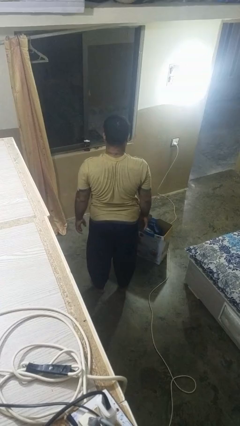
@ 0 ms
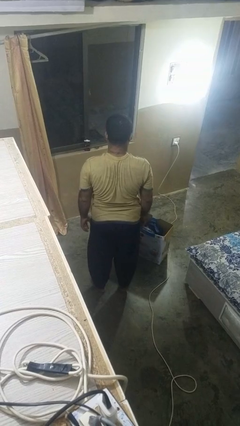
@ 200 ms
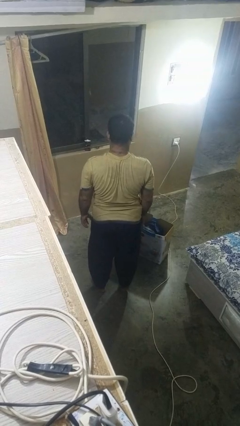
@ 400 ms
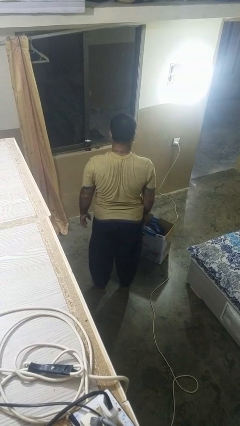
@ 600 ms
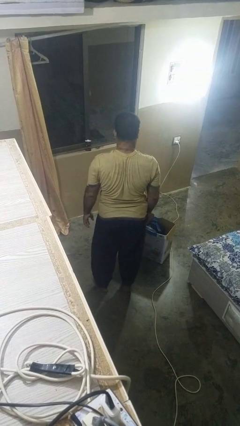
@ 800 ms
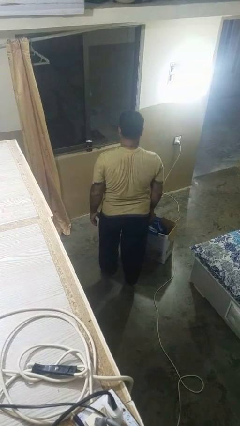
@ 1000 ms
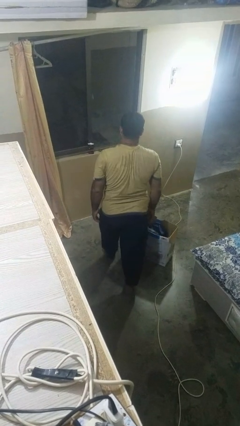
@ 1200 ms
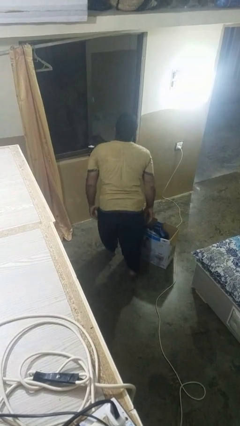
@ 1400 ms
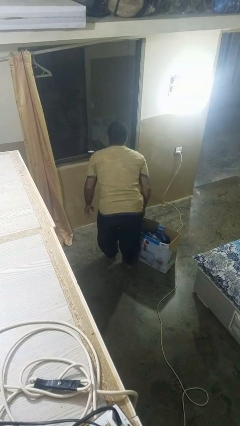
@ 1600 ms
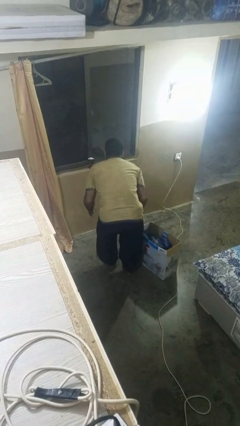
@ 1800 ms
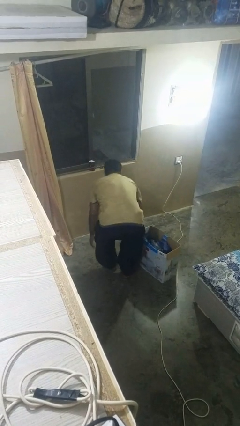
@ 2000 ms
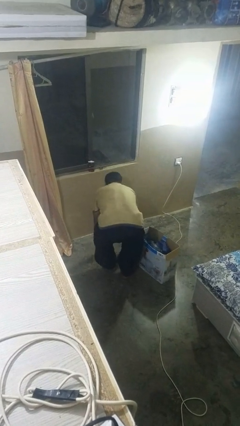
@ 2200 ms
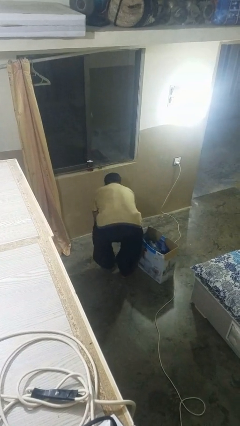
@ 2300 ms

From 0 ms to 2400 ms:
person trips on object on floor

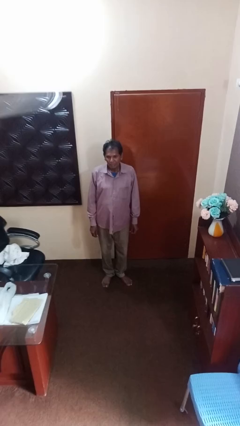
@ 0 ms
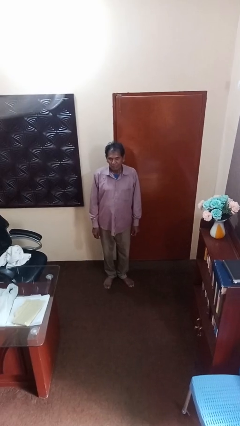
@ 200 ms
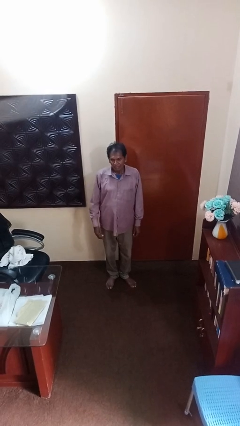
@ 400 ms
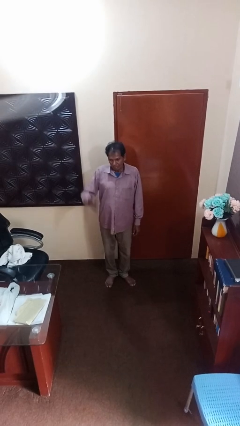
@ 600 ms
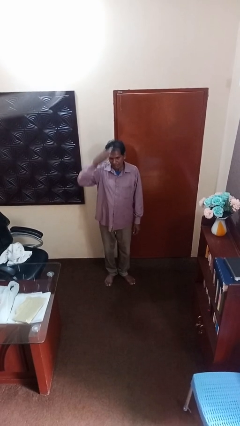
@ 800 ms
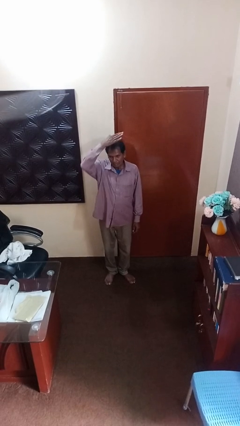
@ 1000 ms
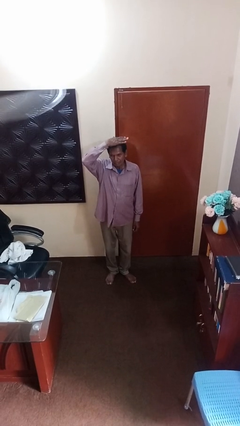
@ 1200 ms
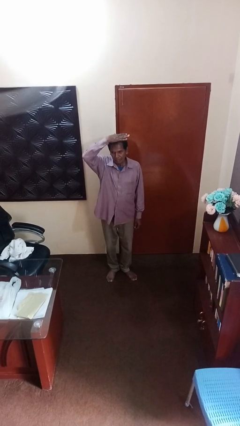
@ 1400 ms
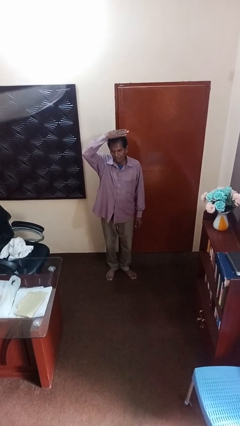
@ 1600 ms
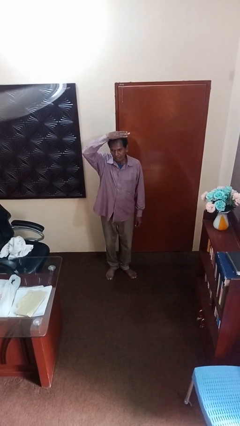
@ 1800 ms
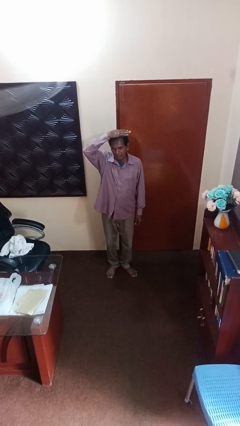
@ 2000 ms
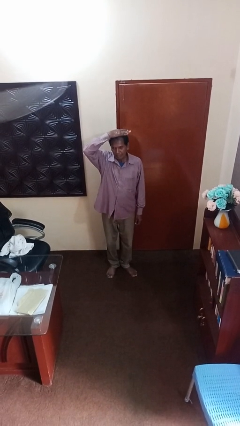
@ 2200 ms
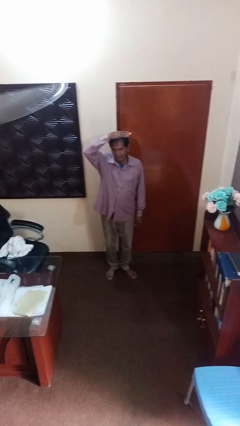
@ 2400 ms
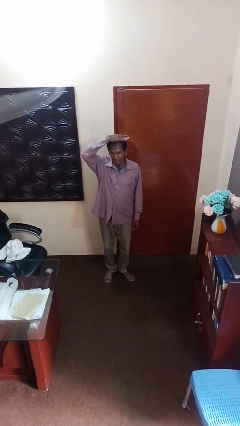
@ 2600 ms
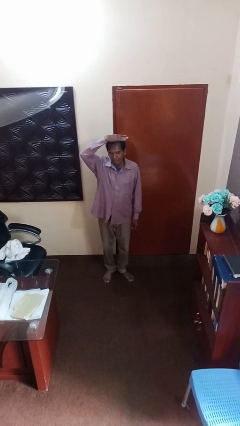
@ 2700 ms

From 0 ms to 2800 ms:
person pats head

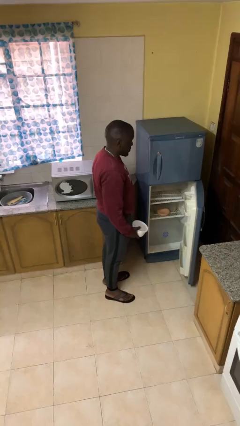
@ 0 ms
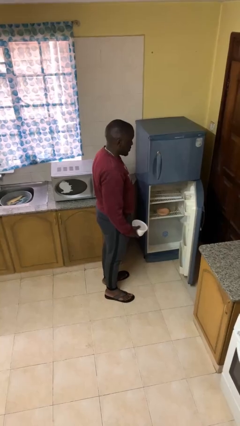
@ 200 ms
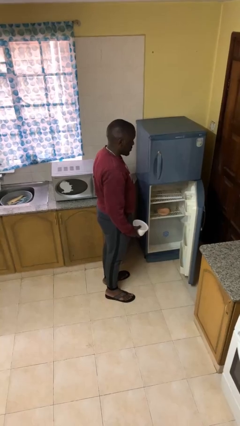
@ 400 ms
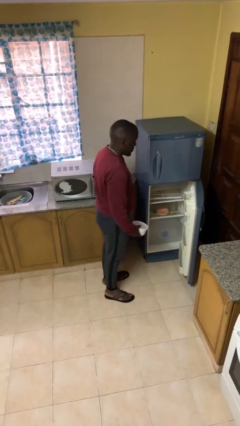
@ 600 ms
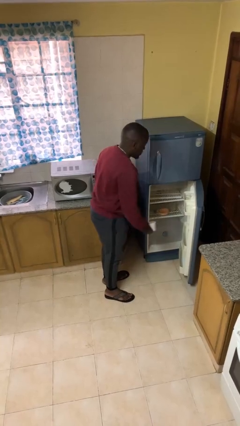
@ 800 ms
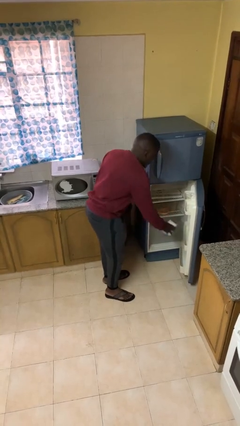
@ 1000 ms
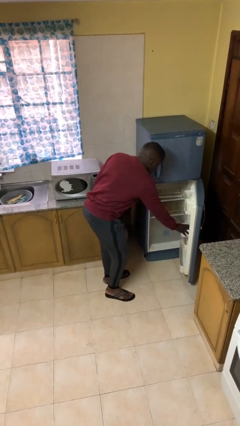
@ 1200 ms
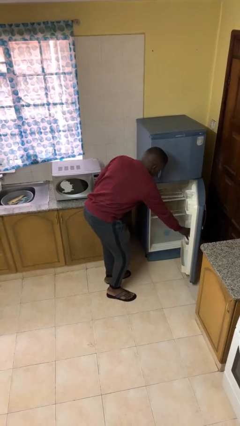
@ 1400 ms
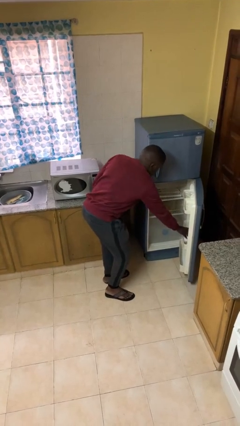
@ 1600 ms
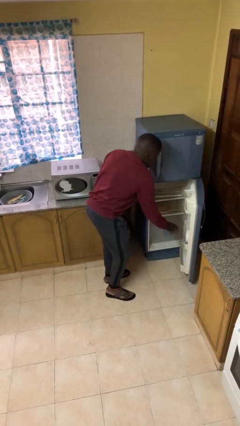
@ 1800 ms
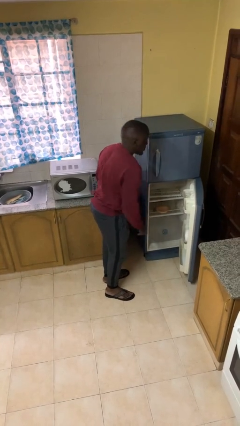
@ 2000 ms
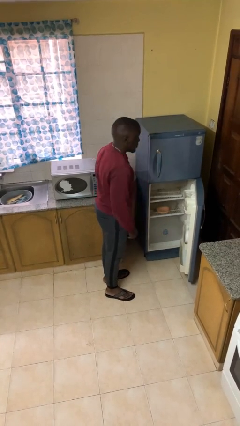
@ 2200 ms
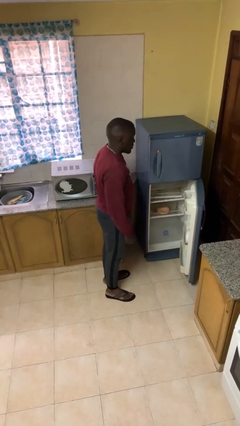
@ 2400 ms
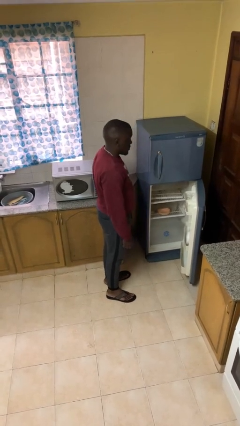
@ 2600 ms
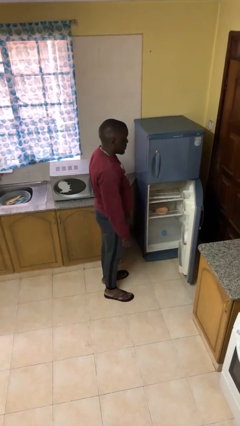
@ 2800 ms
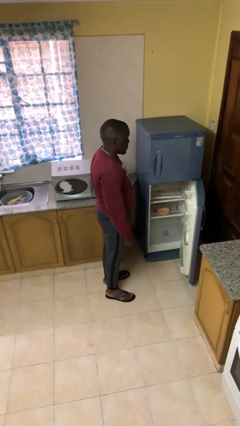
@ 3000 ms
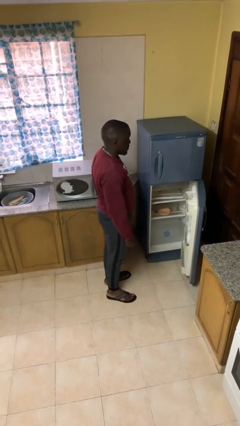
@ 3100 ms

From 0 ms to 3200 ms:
person puts object into refrigerator

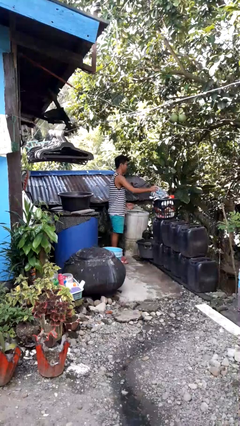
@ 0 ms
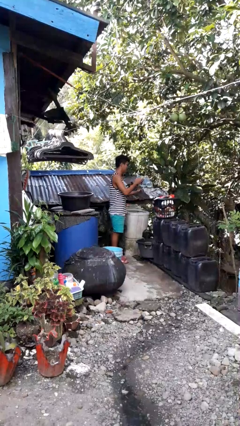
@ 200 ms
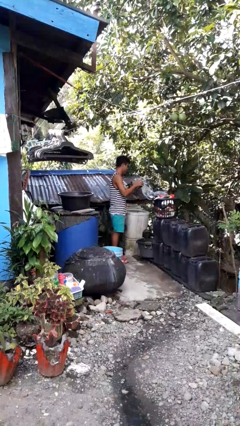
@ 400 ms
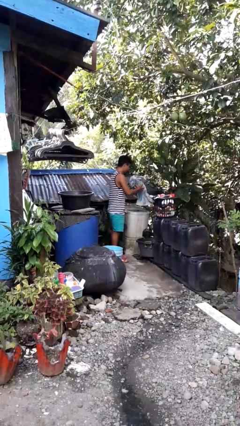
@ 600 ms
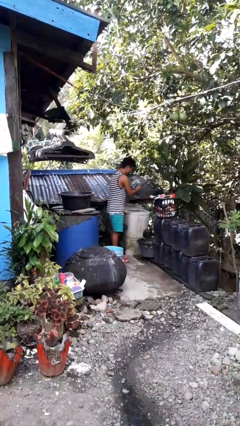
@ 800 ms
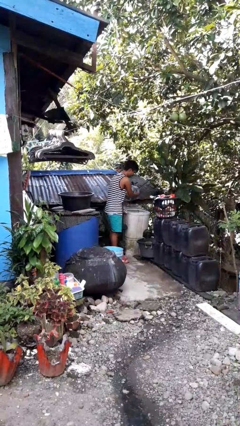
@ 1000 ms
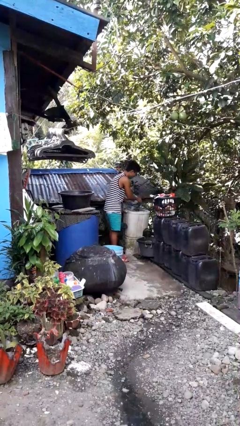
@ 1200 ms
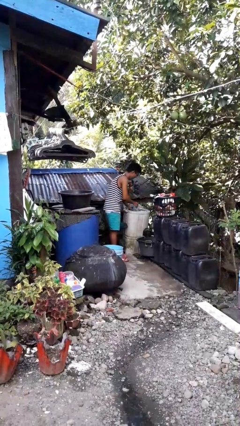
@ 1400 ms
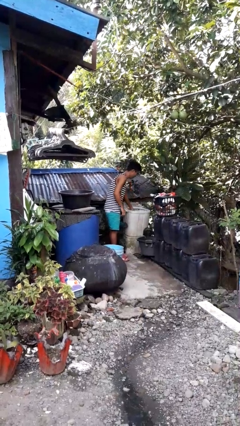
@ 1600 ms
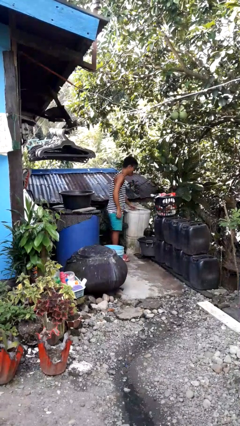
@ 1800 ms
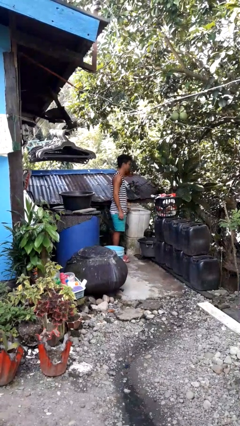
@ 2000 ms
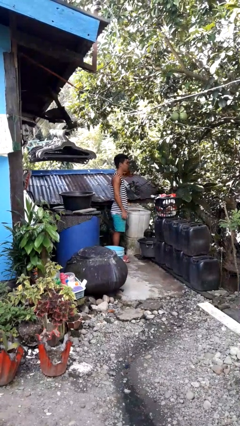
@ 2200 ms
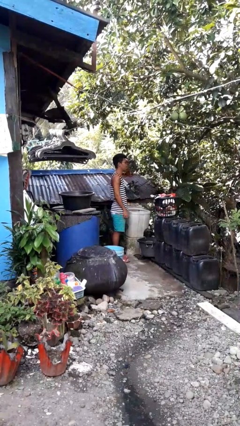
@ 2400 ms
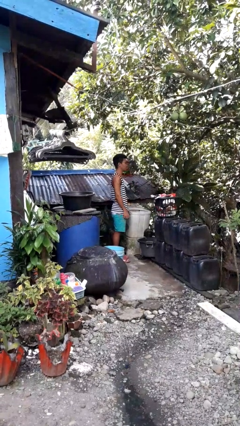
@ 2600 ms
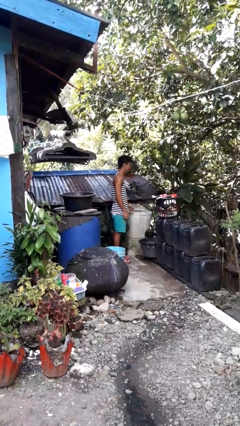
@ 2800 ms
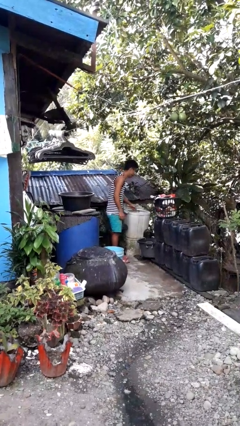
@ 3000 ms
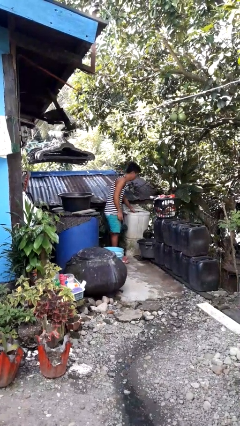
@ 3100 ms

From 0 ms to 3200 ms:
person loads dryer

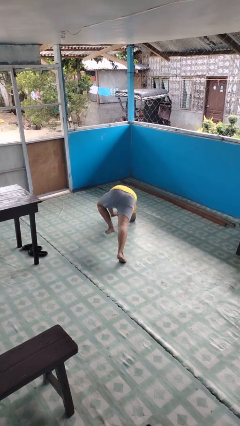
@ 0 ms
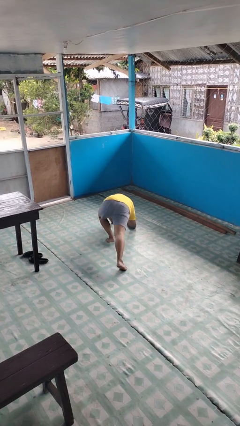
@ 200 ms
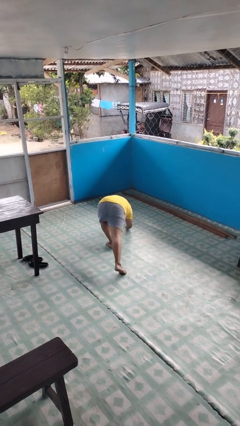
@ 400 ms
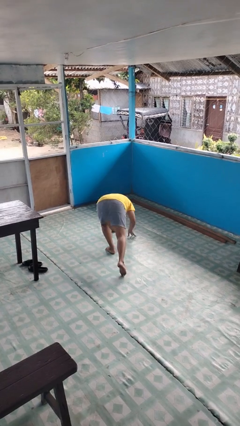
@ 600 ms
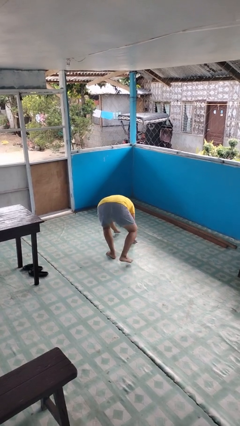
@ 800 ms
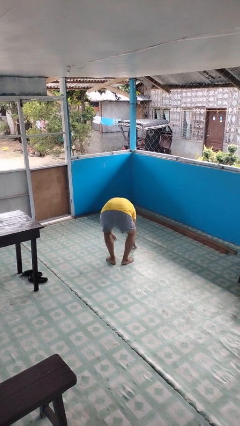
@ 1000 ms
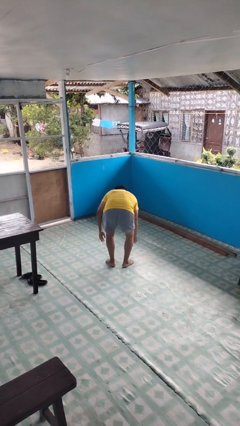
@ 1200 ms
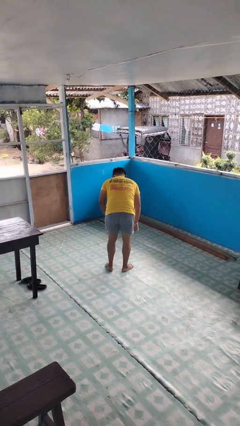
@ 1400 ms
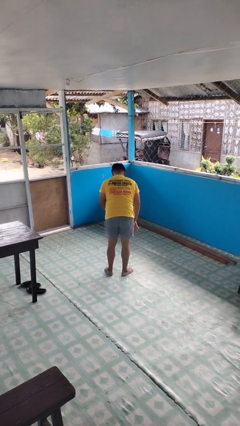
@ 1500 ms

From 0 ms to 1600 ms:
person stands up from floor

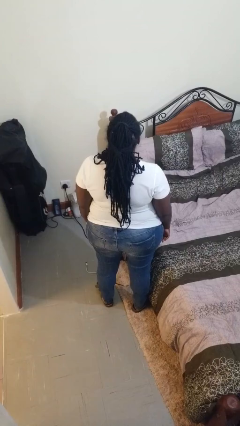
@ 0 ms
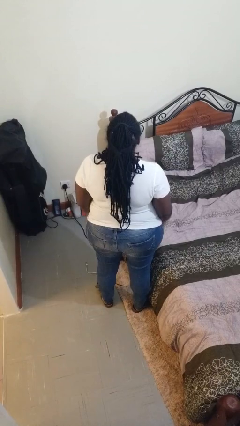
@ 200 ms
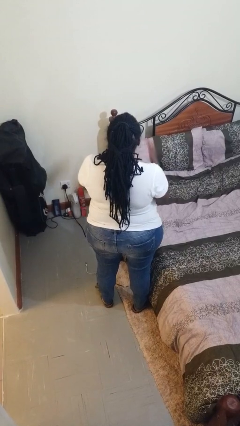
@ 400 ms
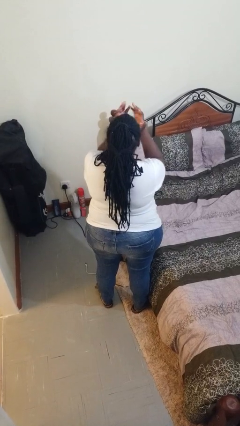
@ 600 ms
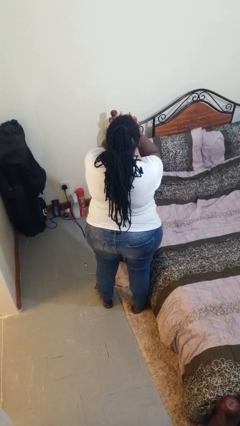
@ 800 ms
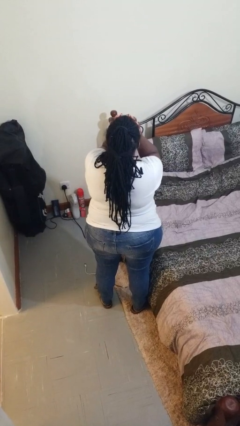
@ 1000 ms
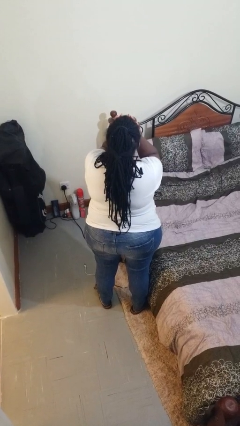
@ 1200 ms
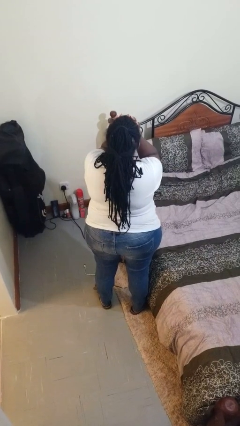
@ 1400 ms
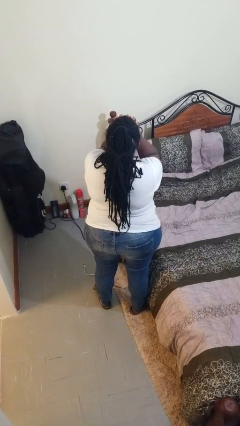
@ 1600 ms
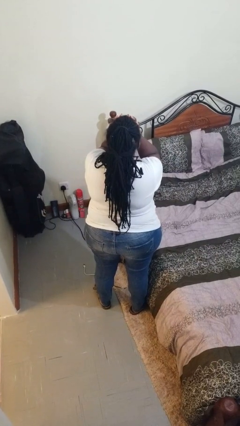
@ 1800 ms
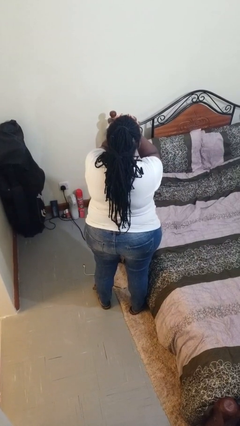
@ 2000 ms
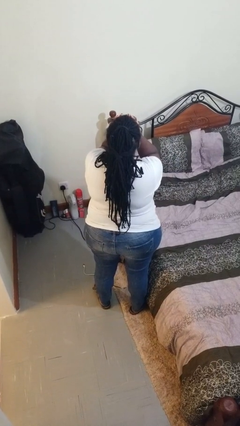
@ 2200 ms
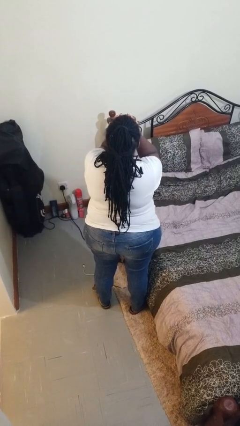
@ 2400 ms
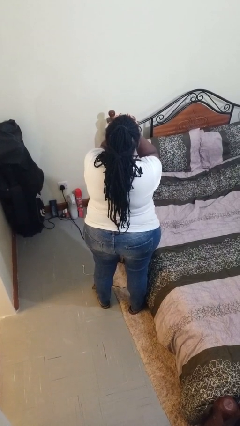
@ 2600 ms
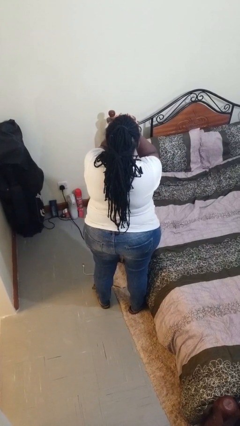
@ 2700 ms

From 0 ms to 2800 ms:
person covers face with hands

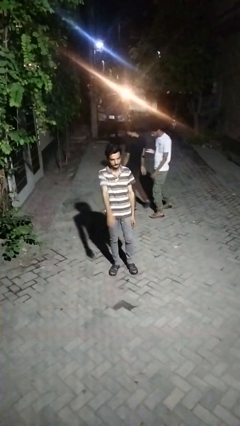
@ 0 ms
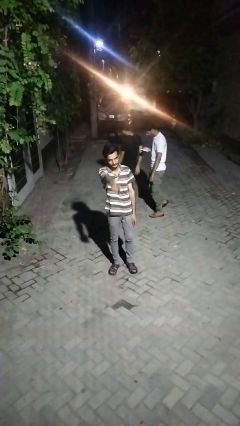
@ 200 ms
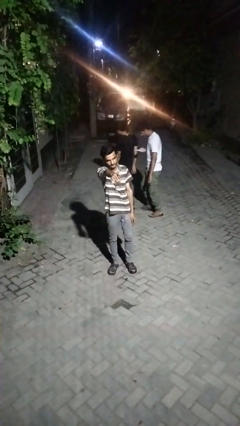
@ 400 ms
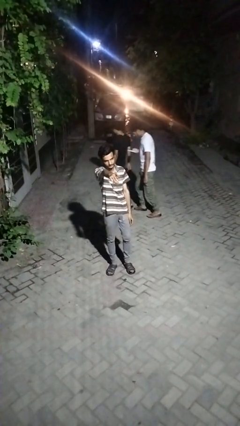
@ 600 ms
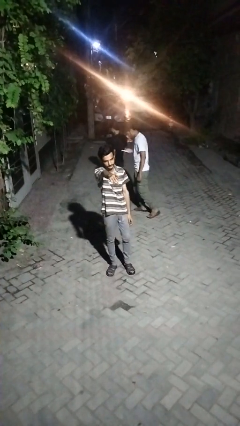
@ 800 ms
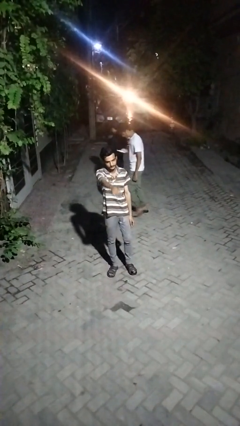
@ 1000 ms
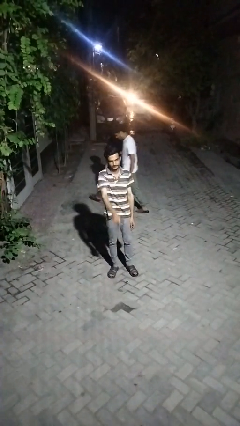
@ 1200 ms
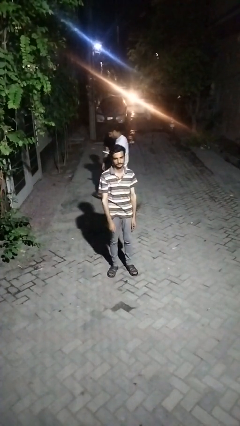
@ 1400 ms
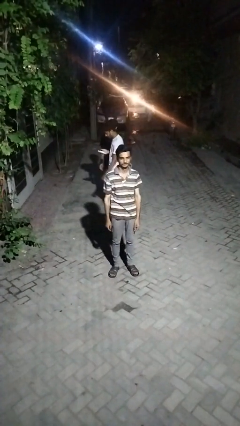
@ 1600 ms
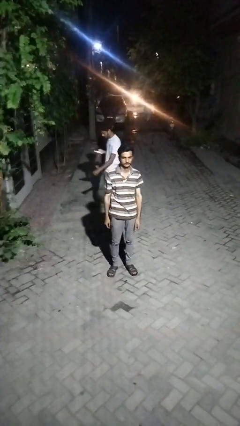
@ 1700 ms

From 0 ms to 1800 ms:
person points at person
